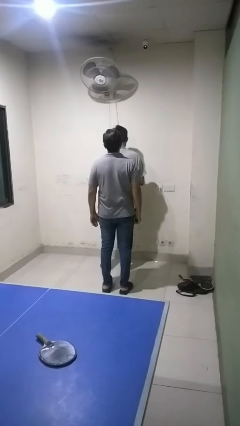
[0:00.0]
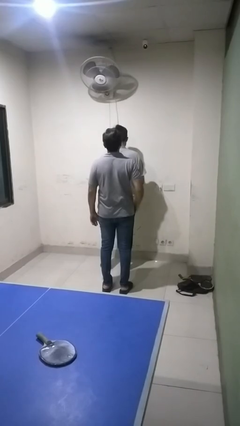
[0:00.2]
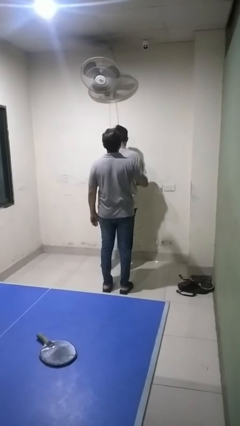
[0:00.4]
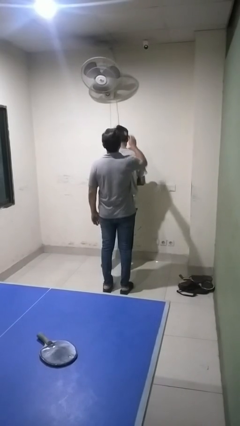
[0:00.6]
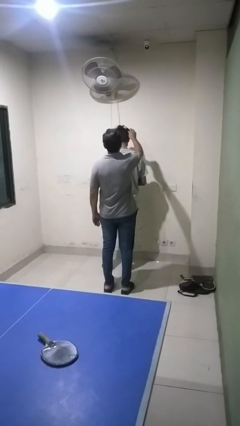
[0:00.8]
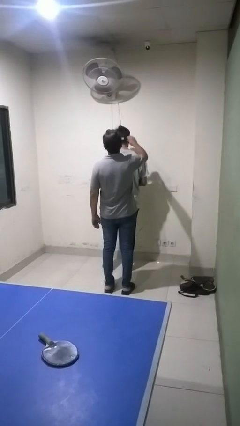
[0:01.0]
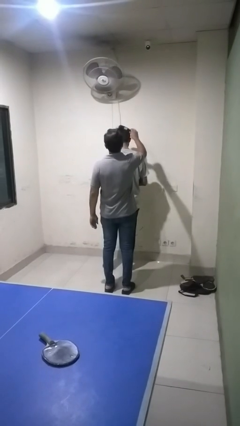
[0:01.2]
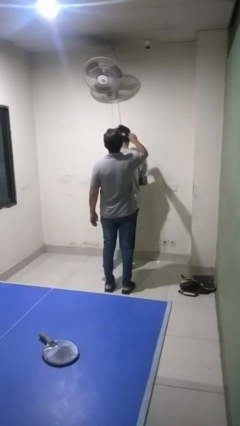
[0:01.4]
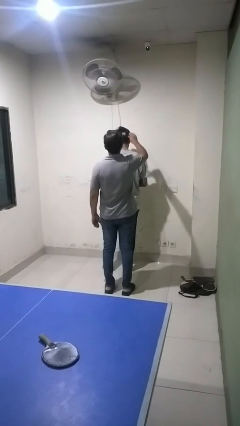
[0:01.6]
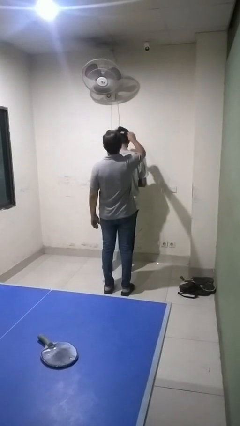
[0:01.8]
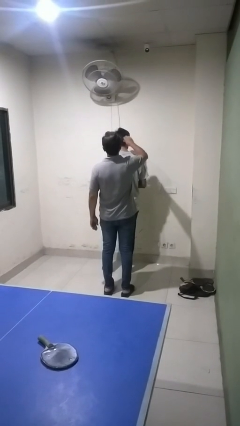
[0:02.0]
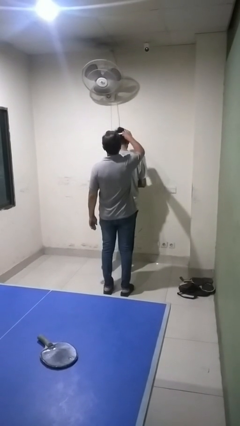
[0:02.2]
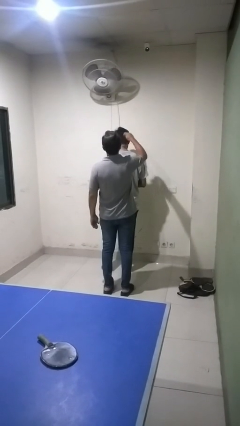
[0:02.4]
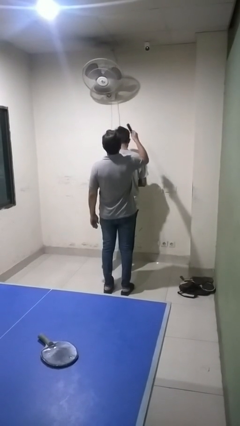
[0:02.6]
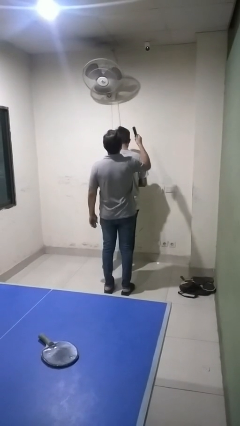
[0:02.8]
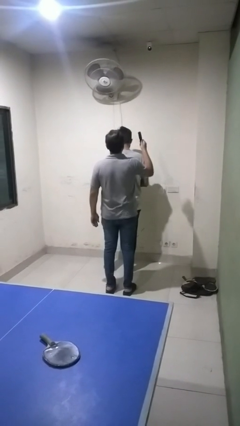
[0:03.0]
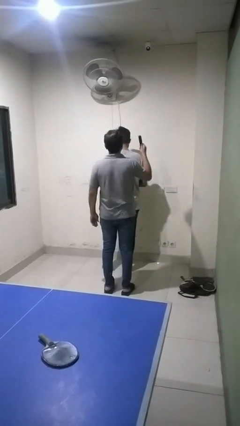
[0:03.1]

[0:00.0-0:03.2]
person brushes hair of person

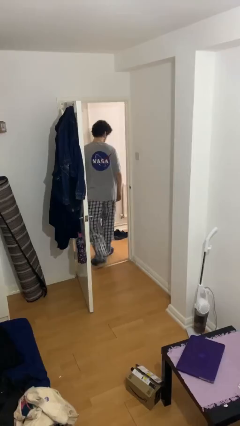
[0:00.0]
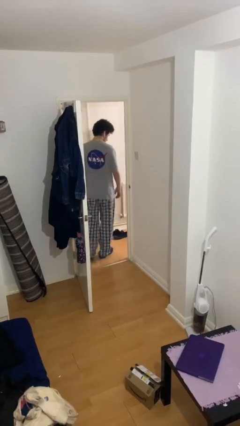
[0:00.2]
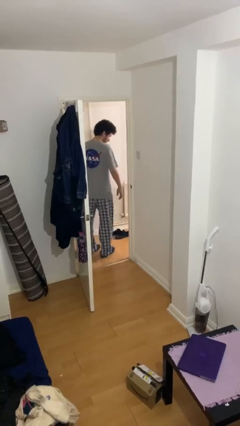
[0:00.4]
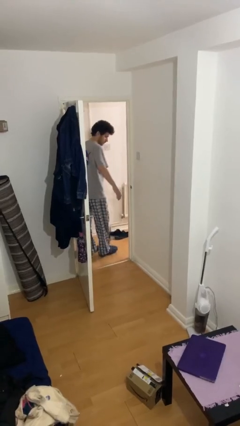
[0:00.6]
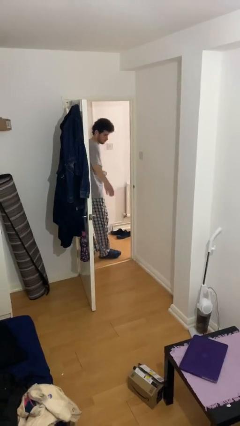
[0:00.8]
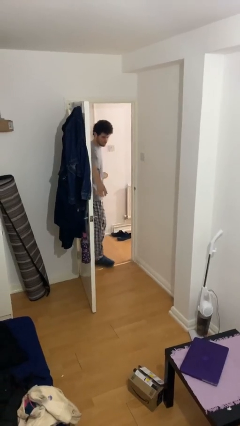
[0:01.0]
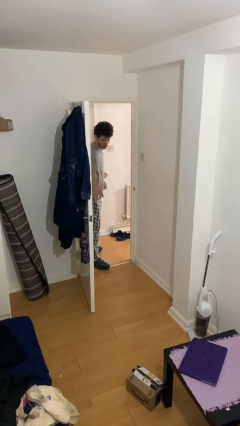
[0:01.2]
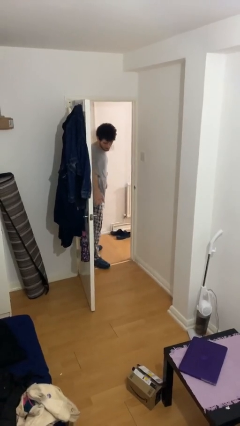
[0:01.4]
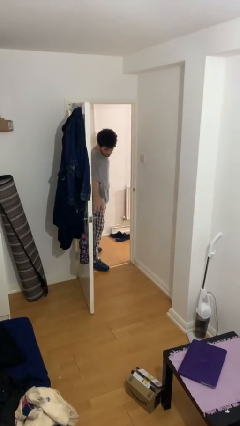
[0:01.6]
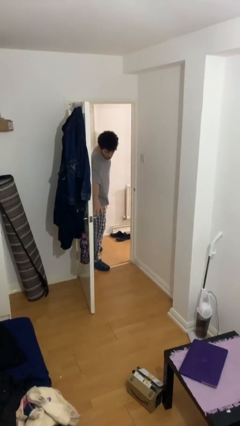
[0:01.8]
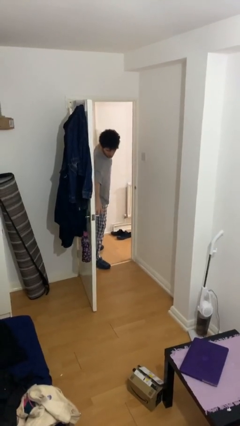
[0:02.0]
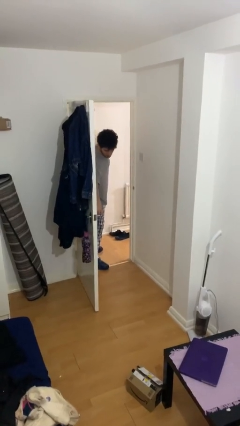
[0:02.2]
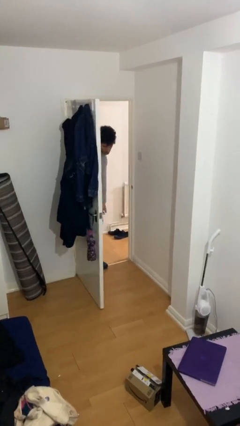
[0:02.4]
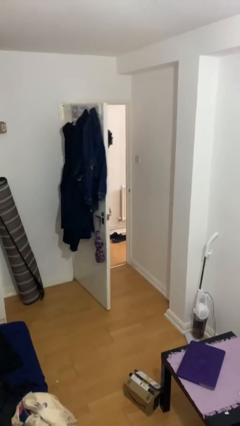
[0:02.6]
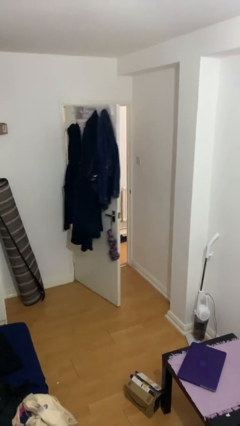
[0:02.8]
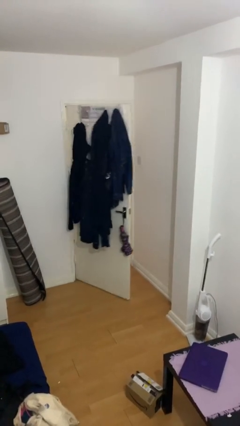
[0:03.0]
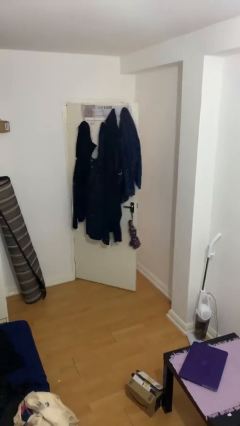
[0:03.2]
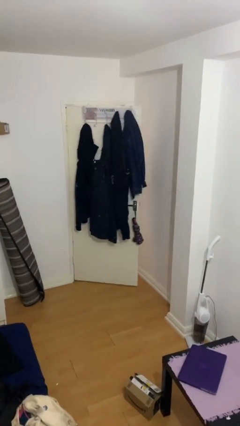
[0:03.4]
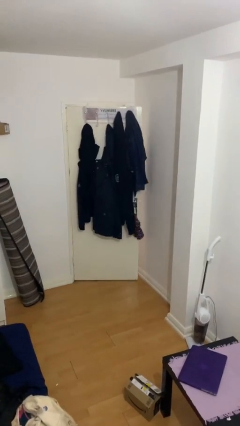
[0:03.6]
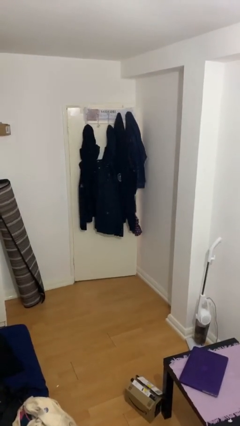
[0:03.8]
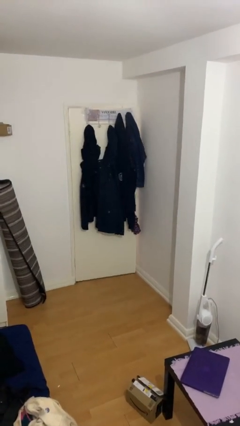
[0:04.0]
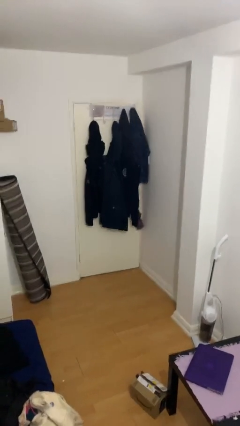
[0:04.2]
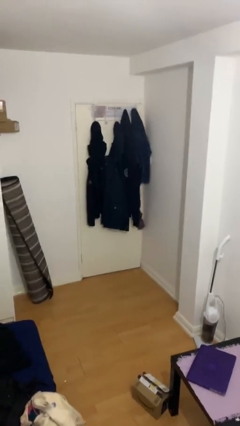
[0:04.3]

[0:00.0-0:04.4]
person closes facility door

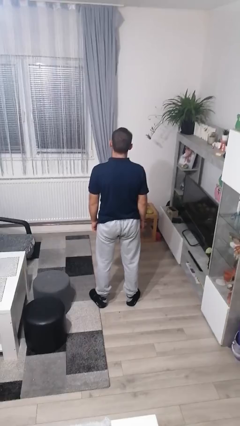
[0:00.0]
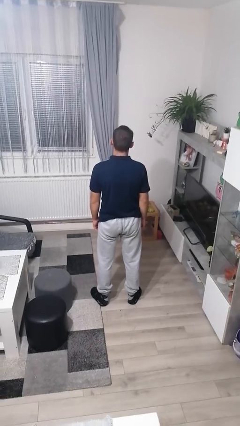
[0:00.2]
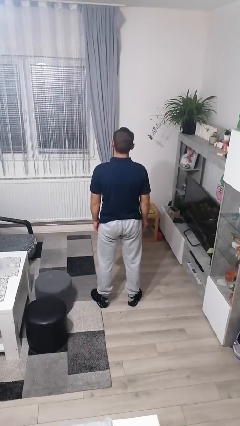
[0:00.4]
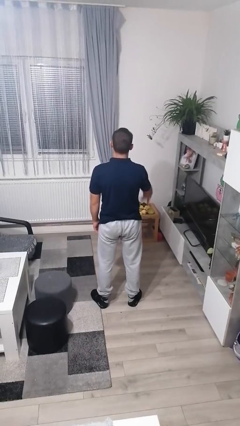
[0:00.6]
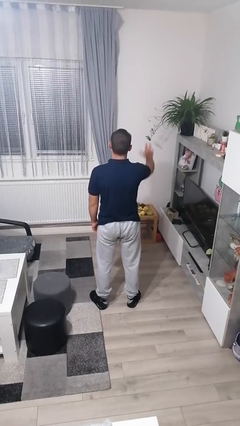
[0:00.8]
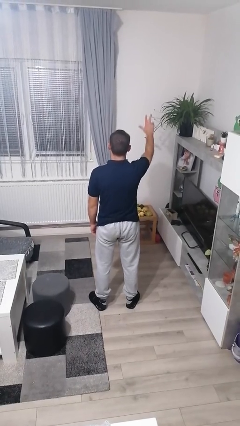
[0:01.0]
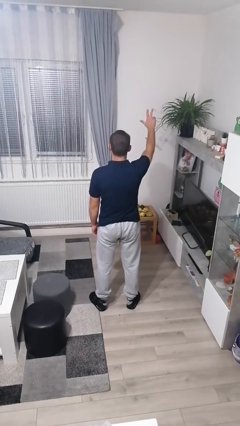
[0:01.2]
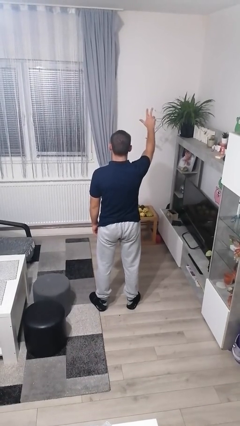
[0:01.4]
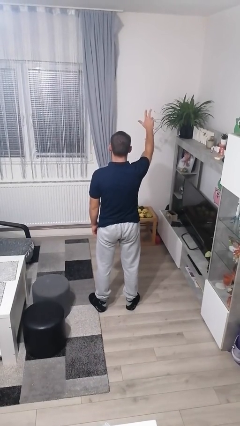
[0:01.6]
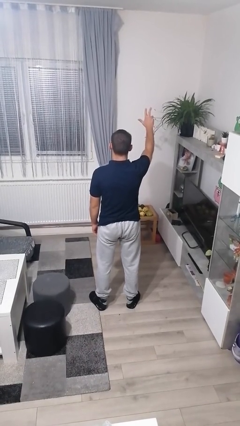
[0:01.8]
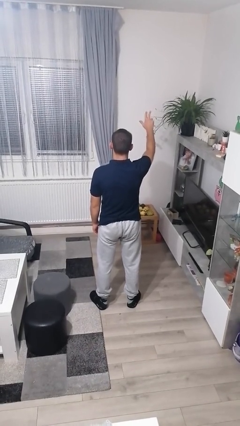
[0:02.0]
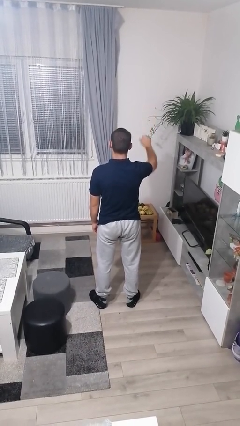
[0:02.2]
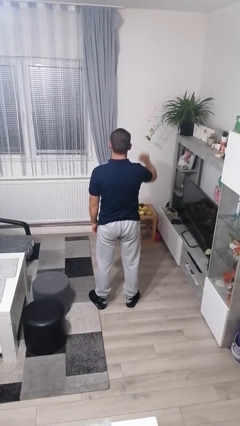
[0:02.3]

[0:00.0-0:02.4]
person gestures number three

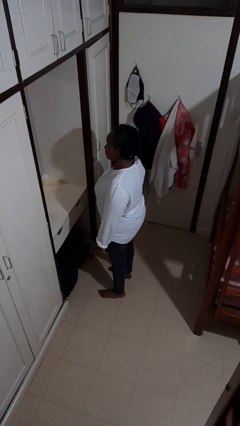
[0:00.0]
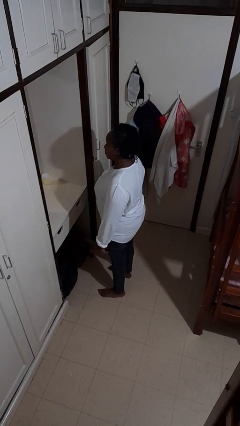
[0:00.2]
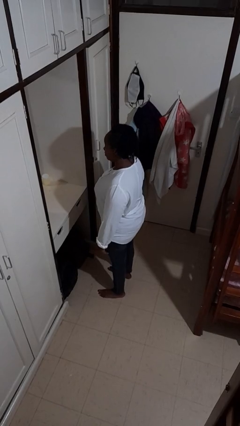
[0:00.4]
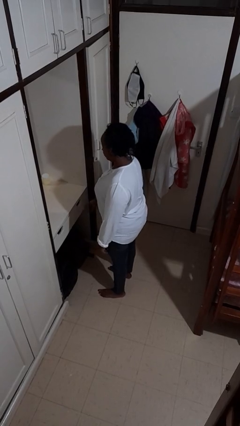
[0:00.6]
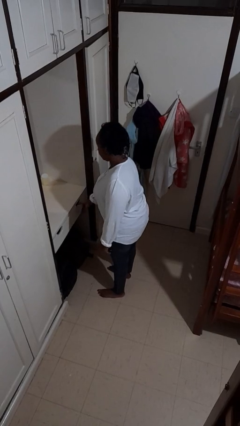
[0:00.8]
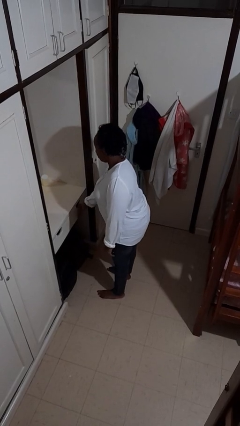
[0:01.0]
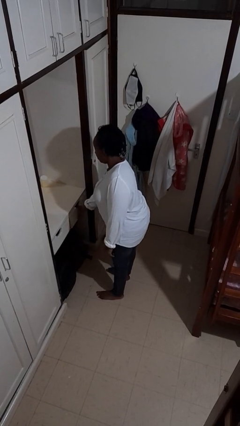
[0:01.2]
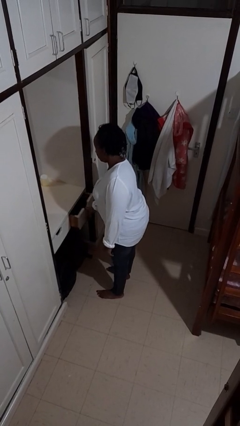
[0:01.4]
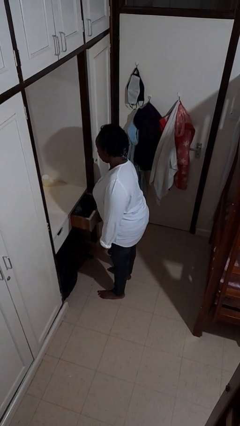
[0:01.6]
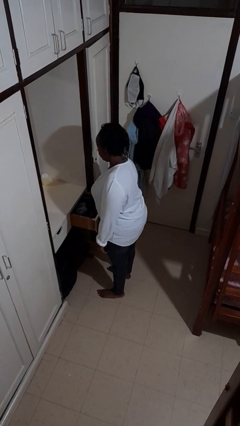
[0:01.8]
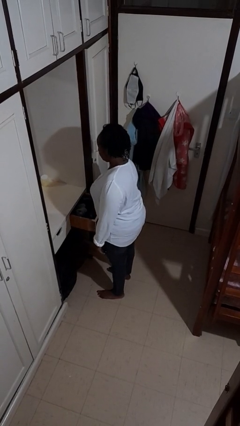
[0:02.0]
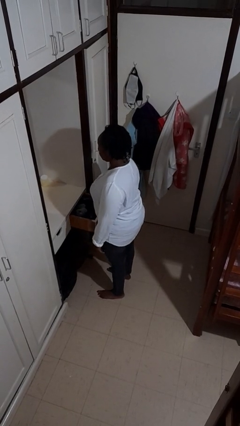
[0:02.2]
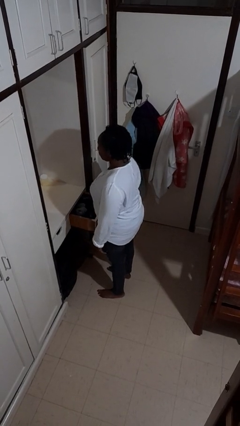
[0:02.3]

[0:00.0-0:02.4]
person opens dresser drawer

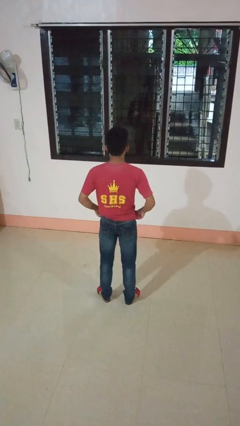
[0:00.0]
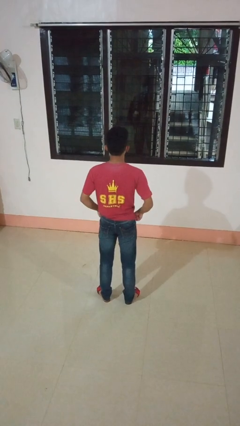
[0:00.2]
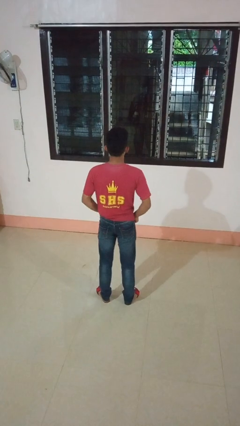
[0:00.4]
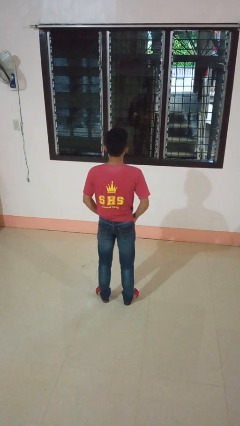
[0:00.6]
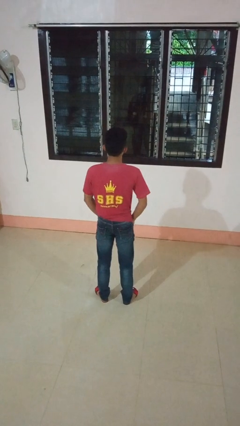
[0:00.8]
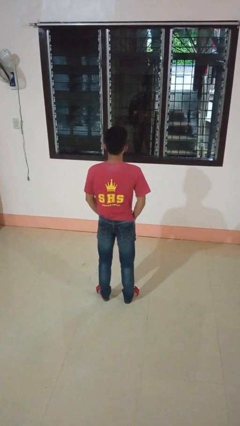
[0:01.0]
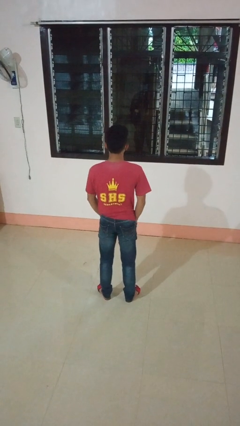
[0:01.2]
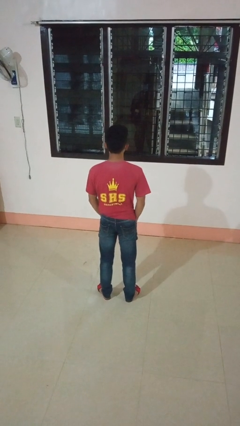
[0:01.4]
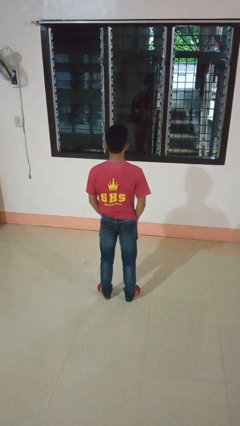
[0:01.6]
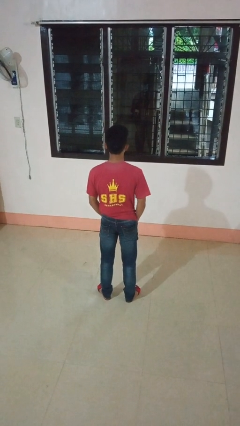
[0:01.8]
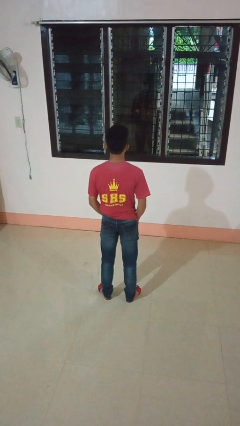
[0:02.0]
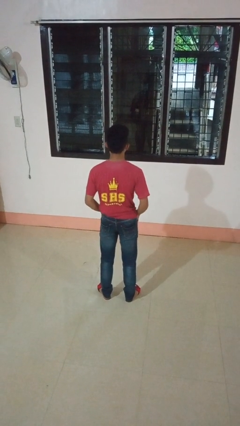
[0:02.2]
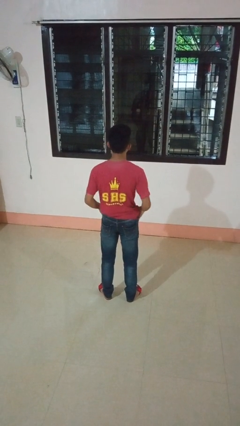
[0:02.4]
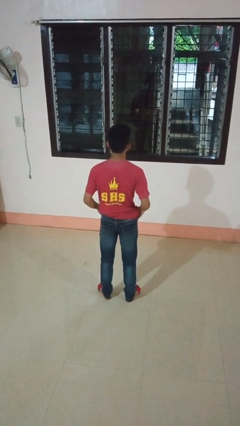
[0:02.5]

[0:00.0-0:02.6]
person puts hands in back pockets

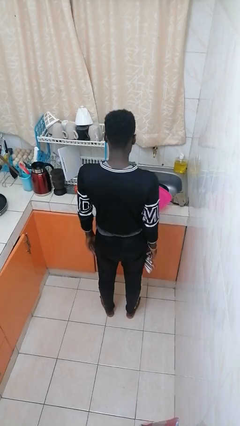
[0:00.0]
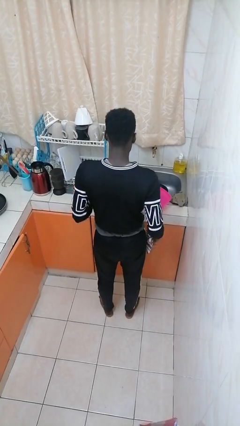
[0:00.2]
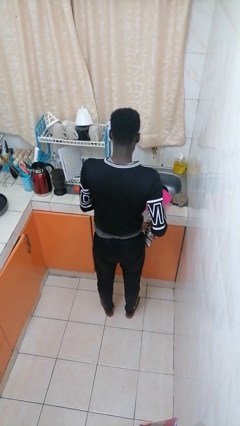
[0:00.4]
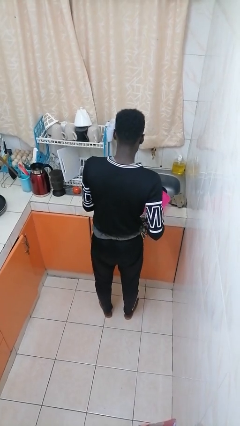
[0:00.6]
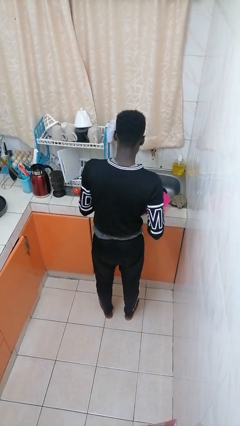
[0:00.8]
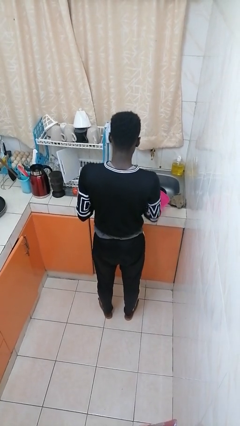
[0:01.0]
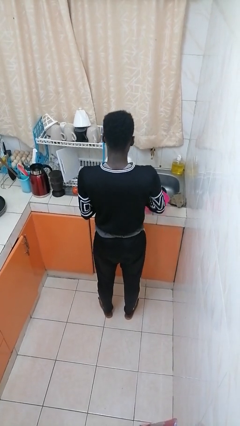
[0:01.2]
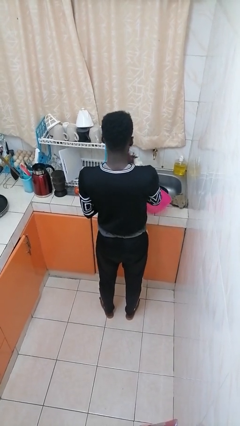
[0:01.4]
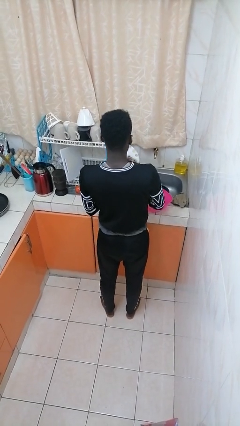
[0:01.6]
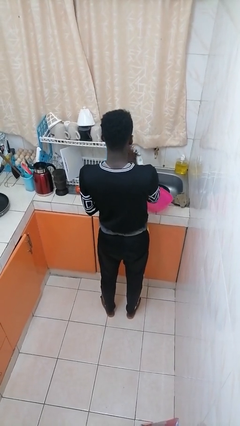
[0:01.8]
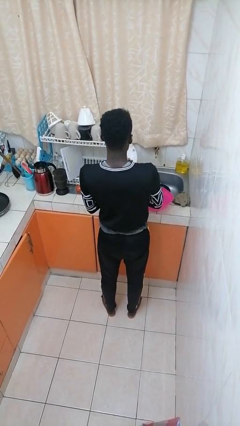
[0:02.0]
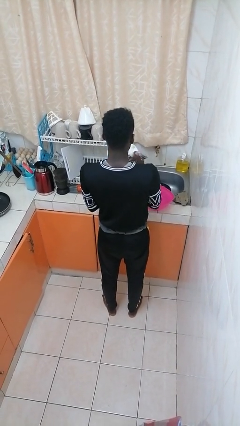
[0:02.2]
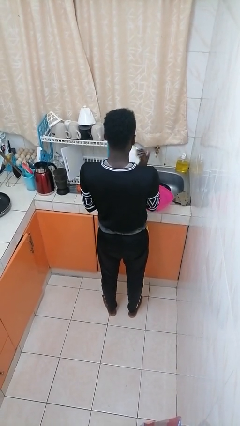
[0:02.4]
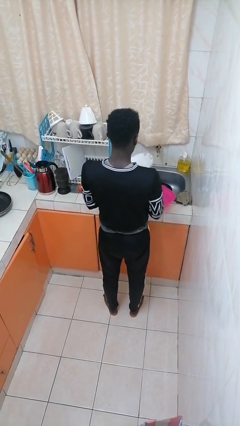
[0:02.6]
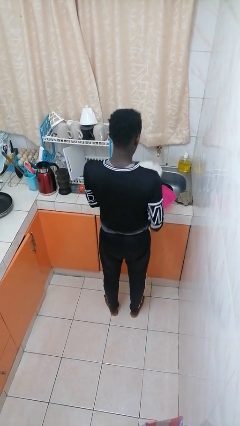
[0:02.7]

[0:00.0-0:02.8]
person dries dish
